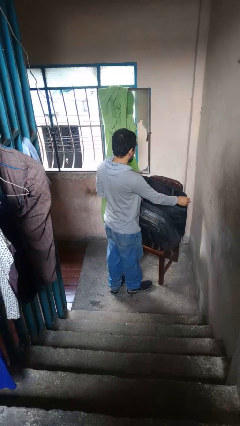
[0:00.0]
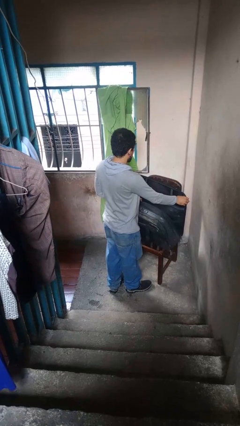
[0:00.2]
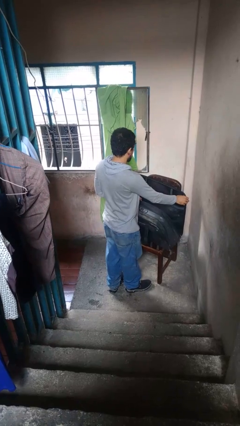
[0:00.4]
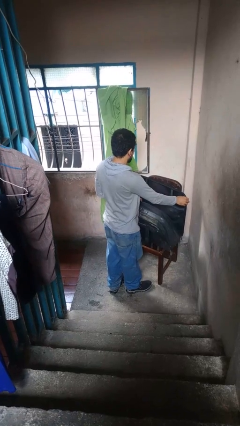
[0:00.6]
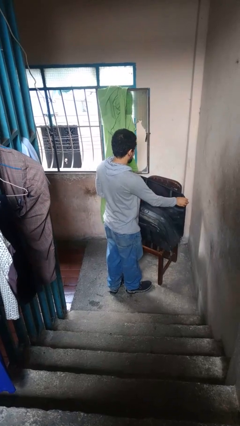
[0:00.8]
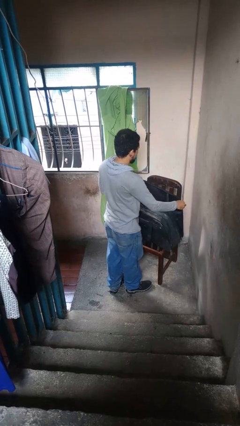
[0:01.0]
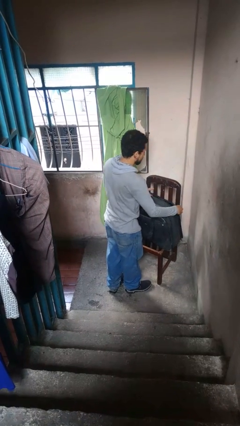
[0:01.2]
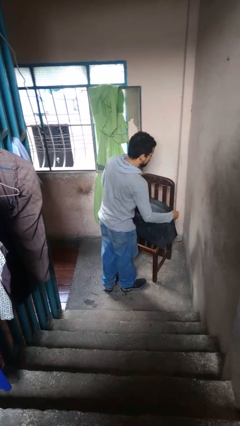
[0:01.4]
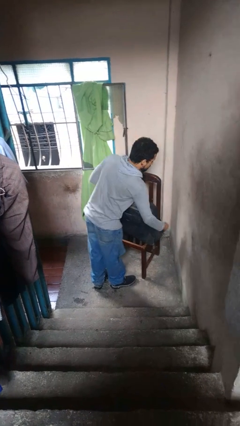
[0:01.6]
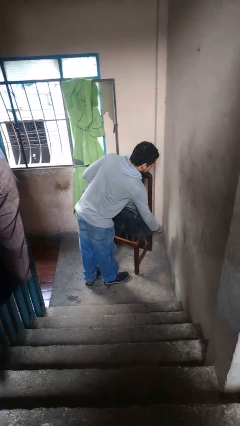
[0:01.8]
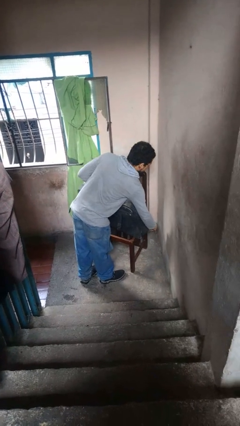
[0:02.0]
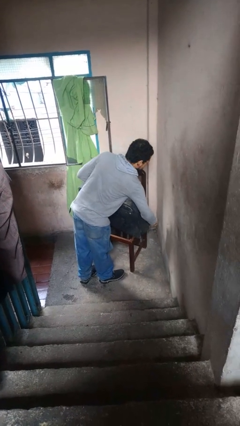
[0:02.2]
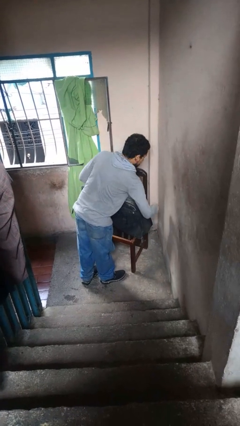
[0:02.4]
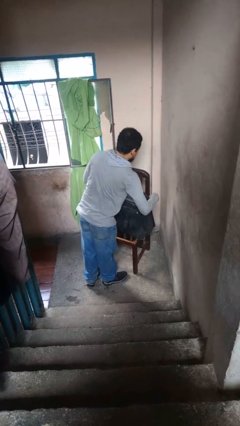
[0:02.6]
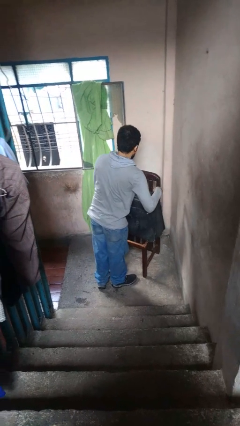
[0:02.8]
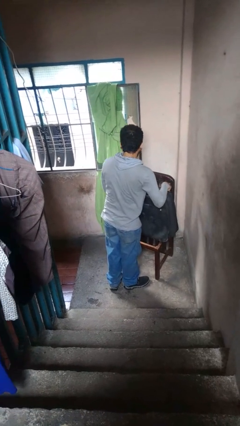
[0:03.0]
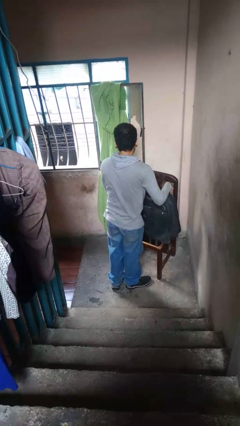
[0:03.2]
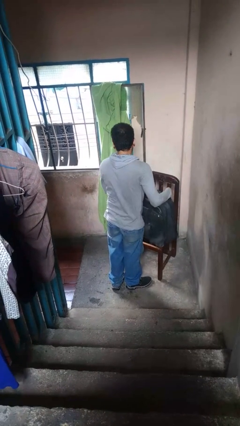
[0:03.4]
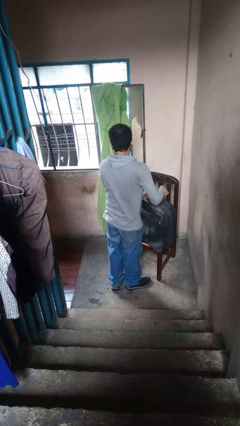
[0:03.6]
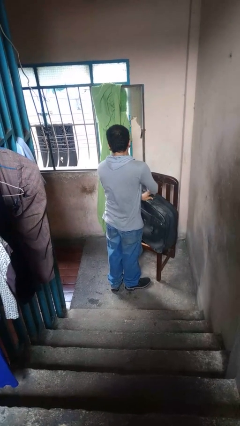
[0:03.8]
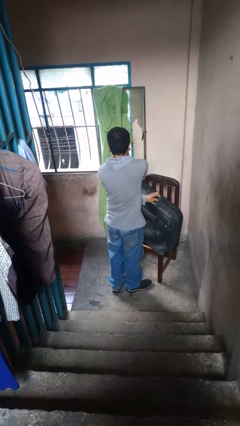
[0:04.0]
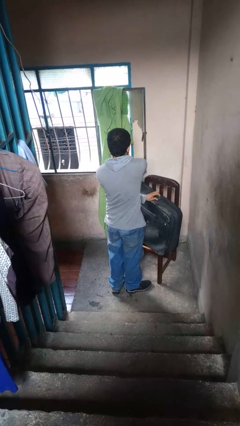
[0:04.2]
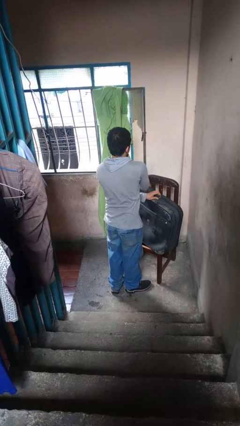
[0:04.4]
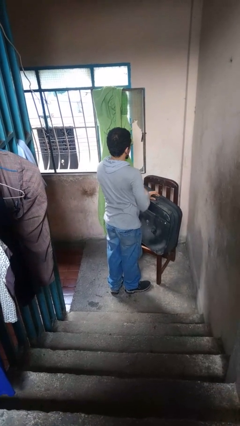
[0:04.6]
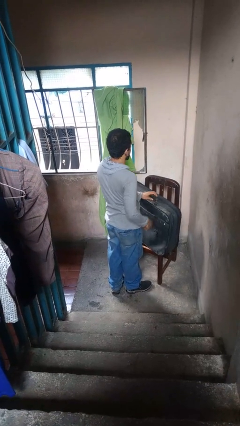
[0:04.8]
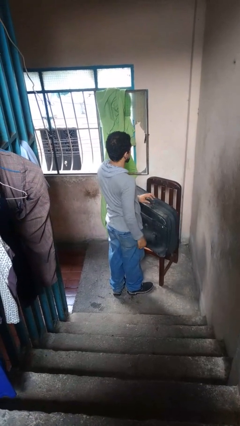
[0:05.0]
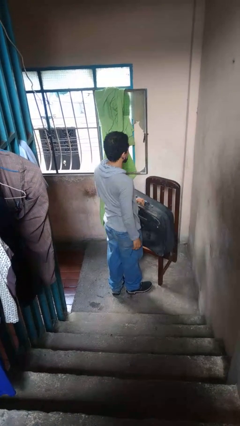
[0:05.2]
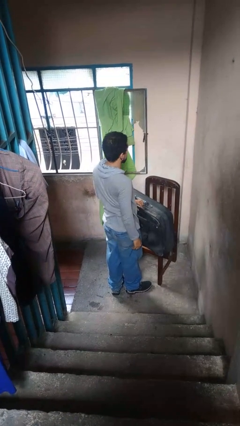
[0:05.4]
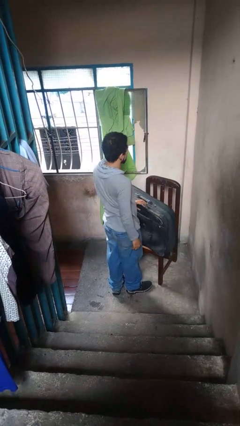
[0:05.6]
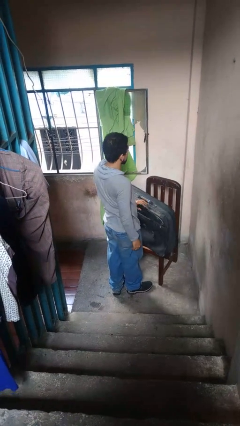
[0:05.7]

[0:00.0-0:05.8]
person closes suitcase

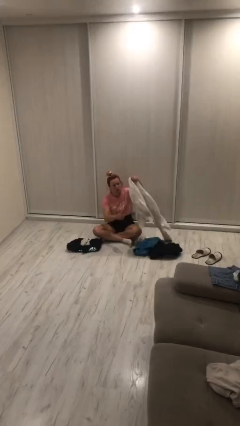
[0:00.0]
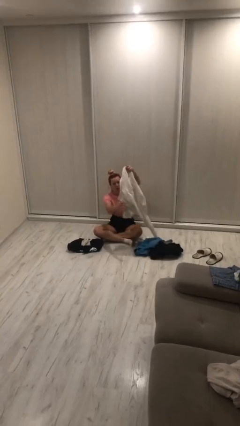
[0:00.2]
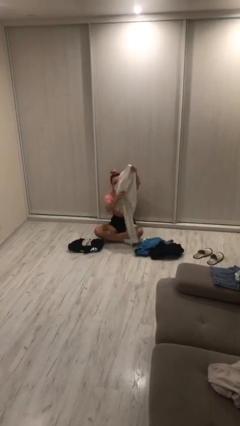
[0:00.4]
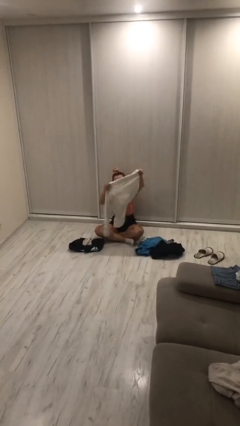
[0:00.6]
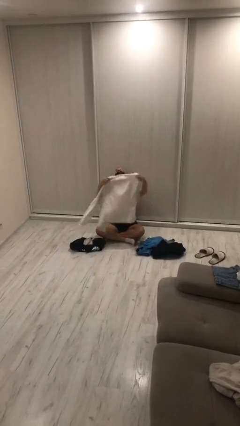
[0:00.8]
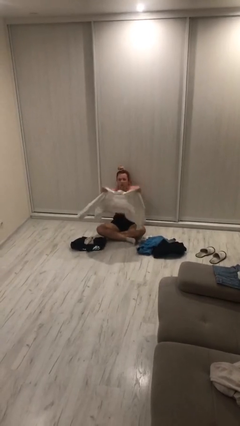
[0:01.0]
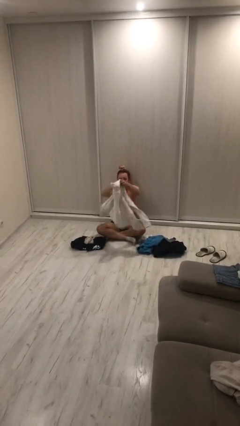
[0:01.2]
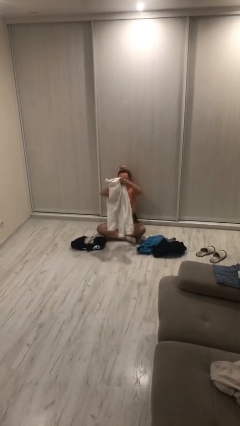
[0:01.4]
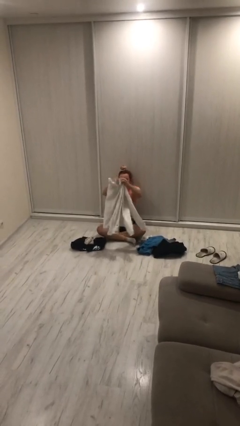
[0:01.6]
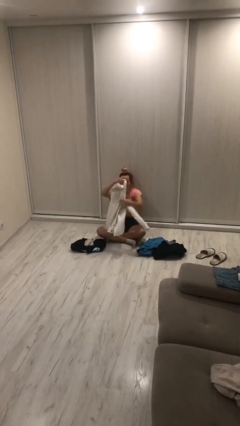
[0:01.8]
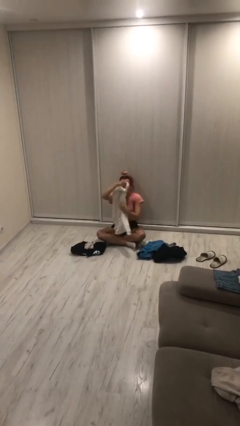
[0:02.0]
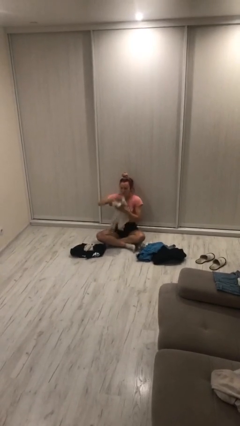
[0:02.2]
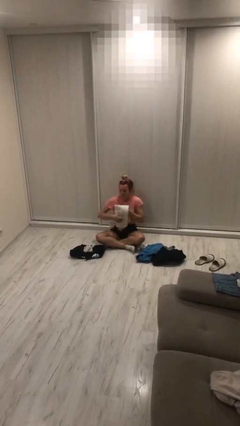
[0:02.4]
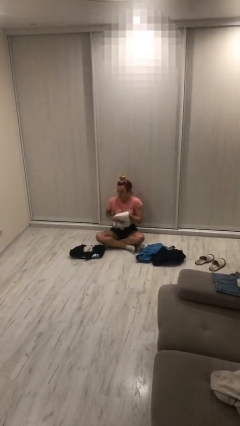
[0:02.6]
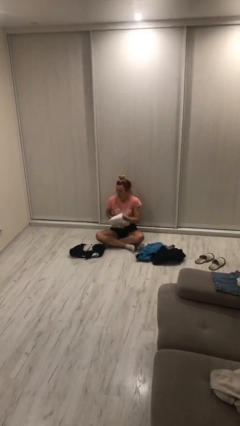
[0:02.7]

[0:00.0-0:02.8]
person folds shirt

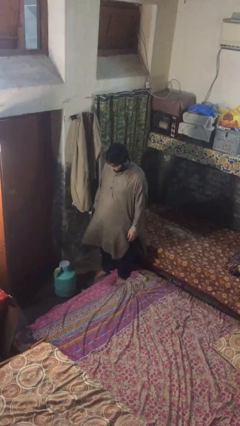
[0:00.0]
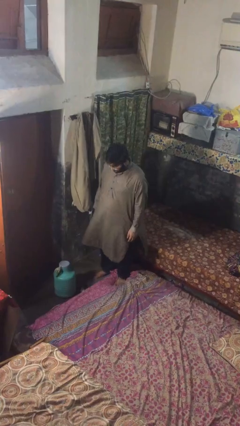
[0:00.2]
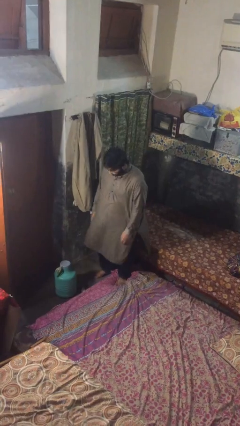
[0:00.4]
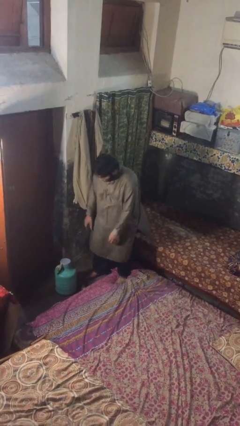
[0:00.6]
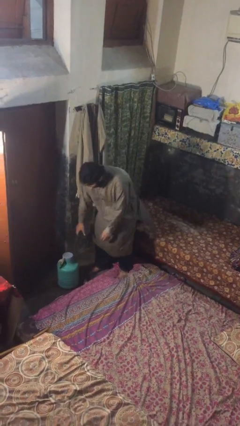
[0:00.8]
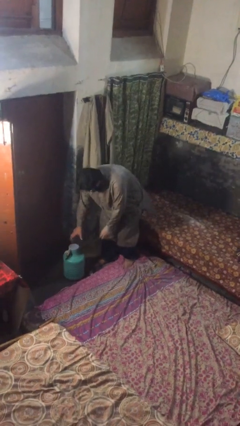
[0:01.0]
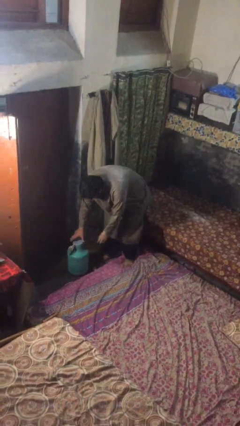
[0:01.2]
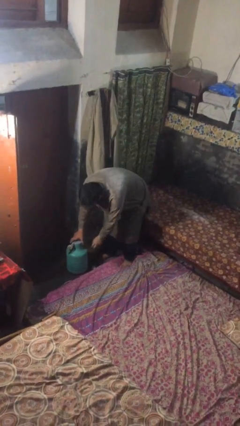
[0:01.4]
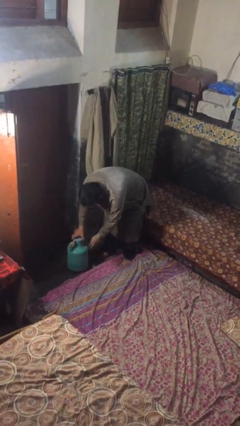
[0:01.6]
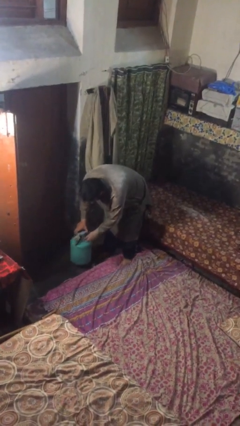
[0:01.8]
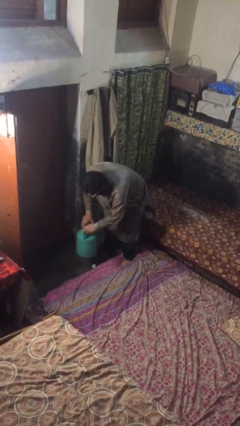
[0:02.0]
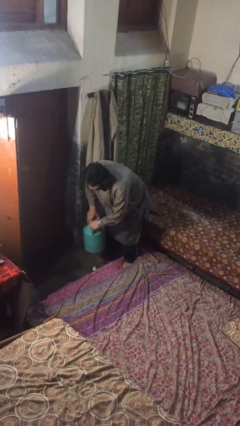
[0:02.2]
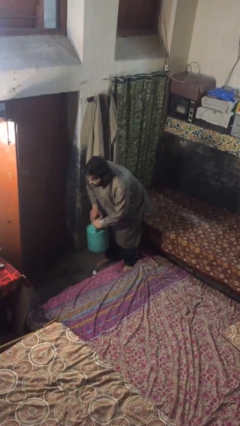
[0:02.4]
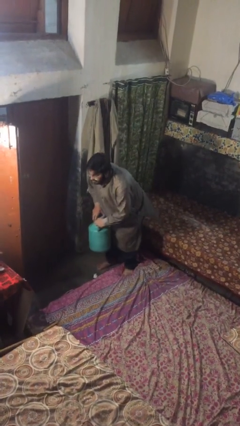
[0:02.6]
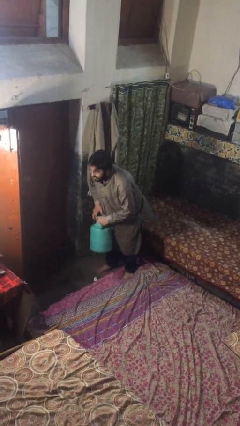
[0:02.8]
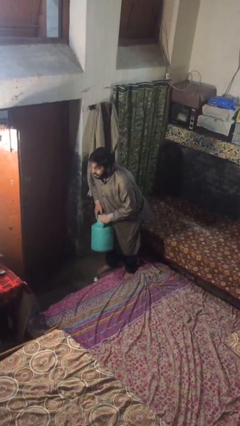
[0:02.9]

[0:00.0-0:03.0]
person picks up object from floor

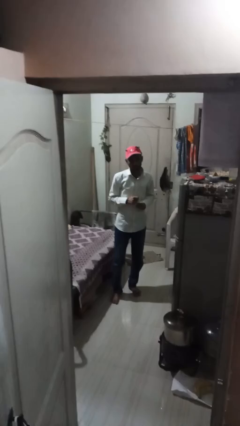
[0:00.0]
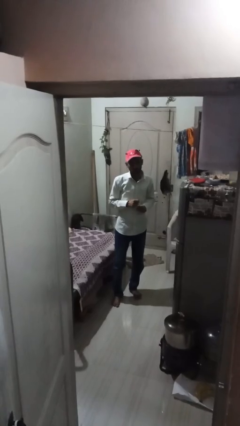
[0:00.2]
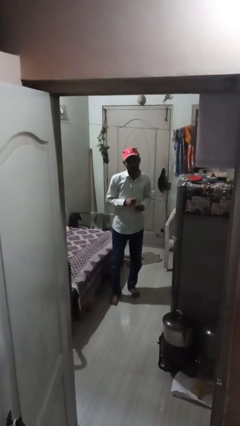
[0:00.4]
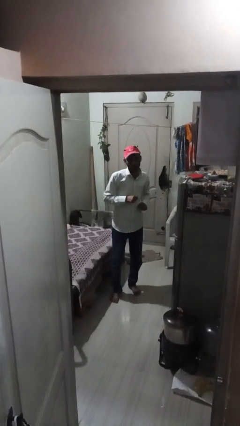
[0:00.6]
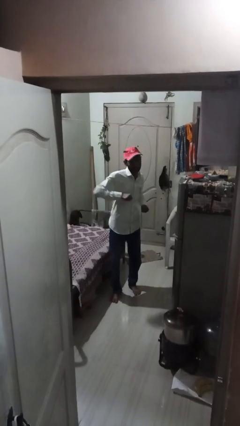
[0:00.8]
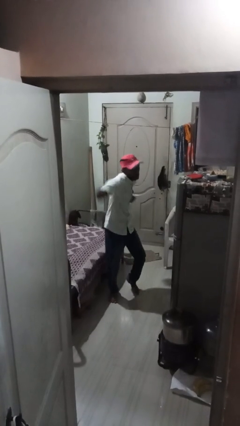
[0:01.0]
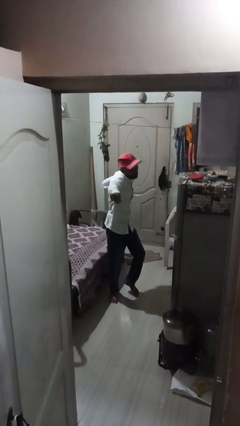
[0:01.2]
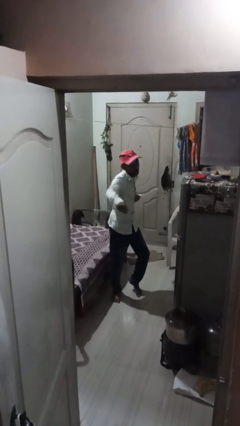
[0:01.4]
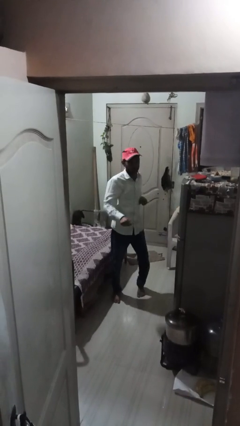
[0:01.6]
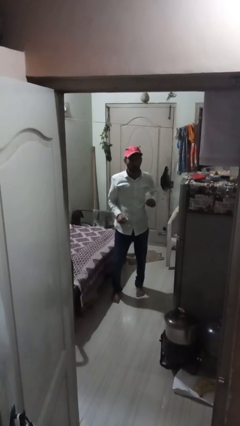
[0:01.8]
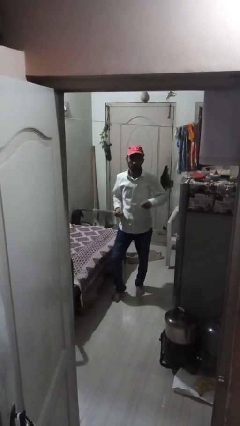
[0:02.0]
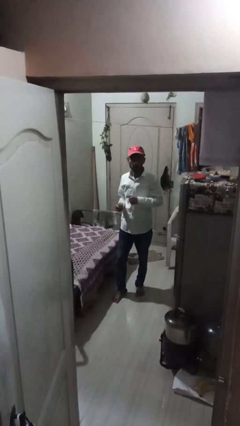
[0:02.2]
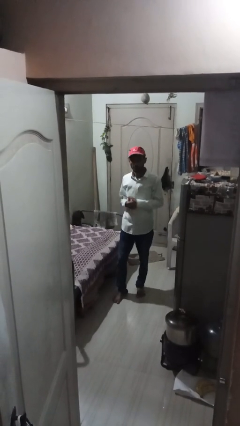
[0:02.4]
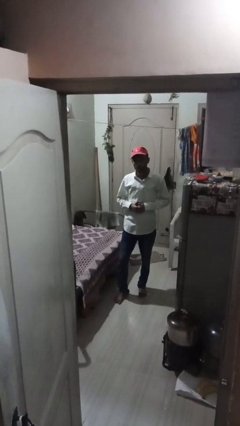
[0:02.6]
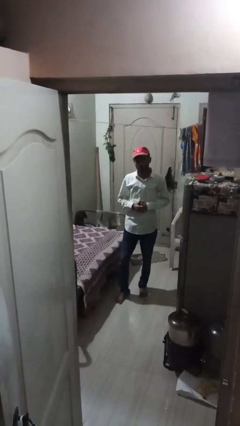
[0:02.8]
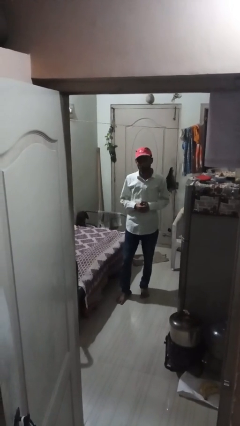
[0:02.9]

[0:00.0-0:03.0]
person punches

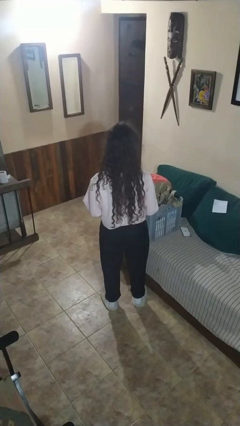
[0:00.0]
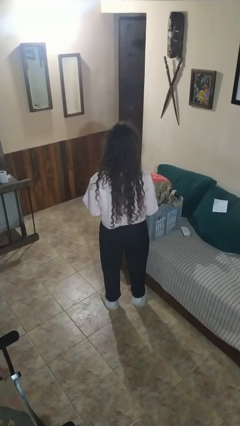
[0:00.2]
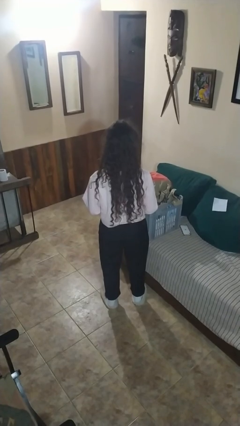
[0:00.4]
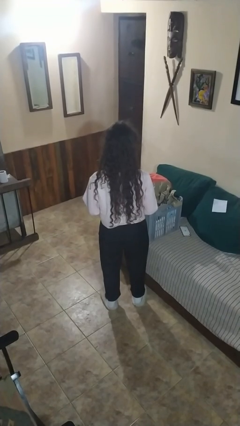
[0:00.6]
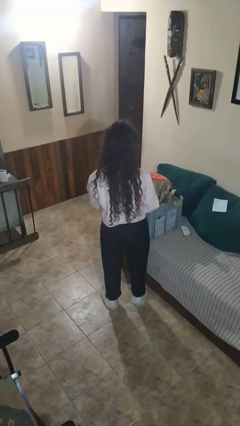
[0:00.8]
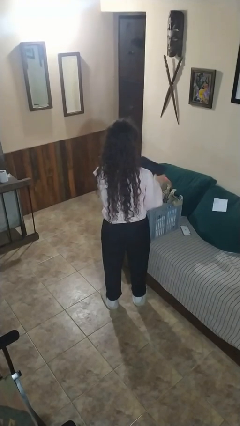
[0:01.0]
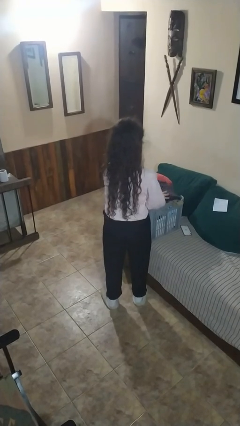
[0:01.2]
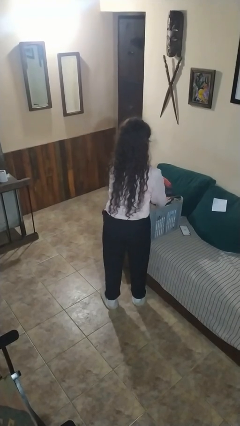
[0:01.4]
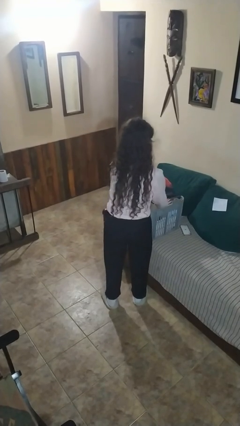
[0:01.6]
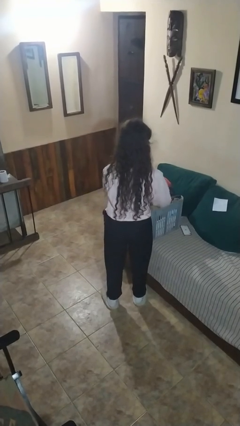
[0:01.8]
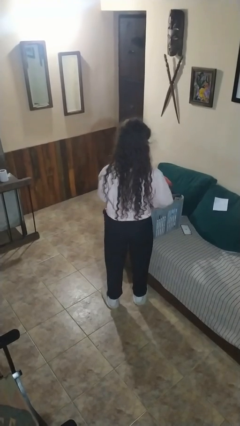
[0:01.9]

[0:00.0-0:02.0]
person puts object into basket

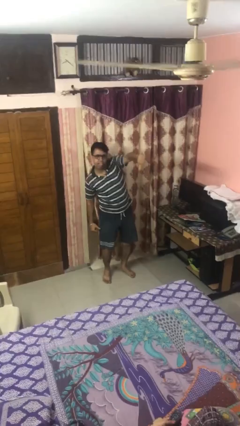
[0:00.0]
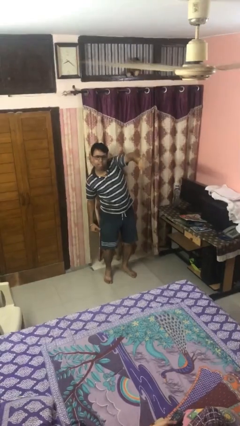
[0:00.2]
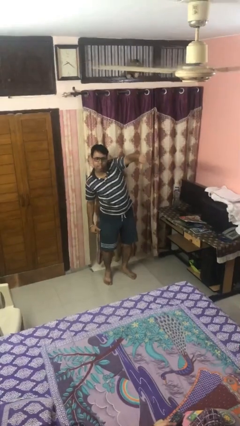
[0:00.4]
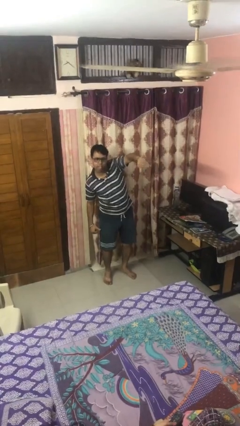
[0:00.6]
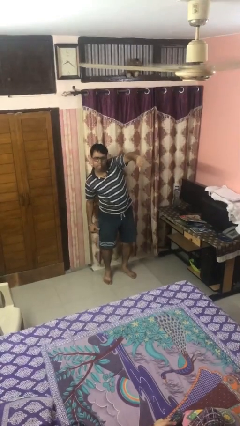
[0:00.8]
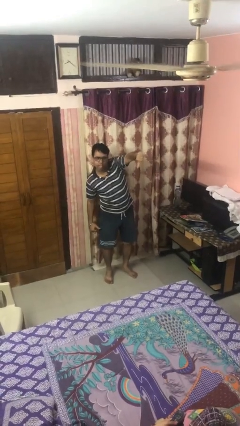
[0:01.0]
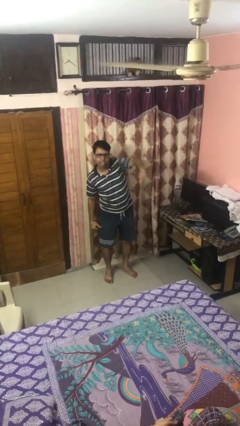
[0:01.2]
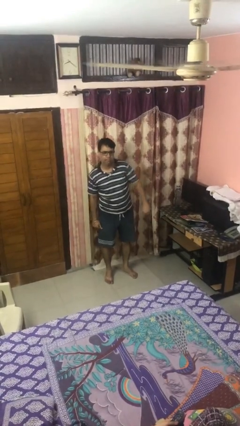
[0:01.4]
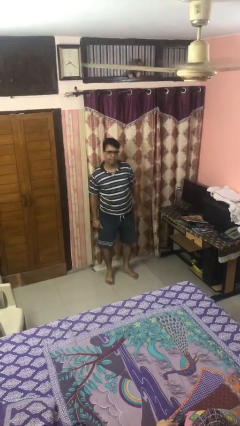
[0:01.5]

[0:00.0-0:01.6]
person gestures thumbs down
